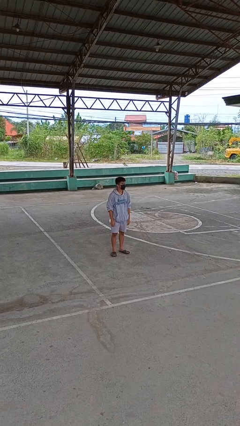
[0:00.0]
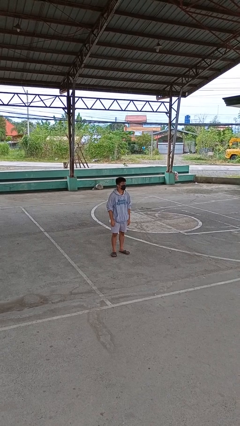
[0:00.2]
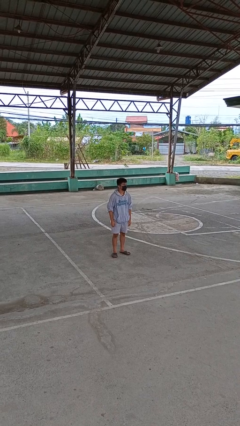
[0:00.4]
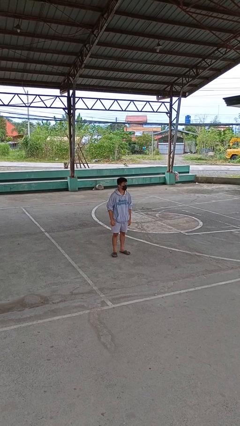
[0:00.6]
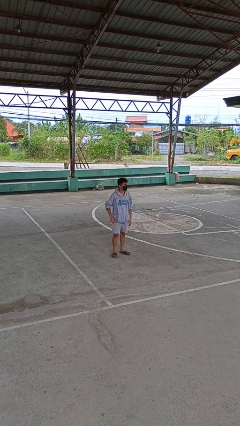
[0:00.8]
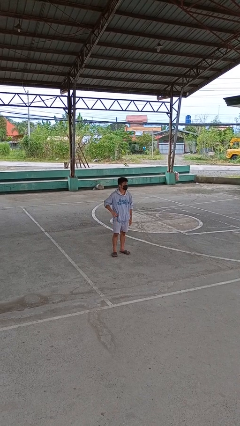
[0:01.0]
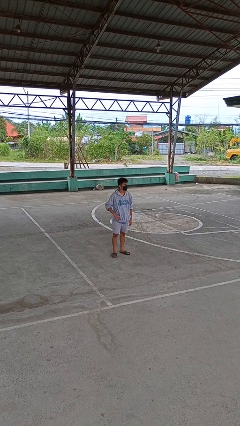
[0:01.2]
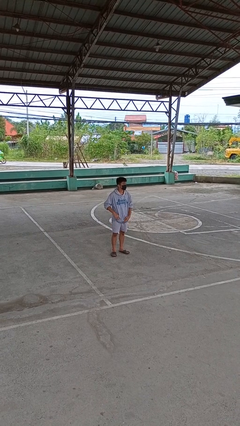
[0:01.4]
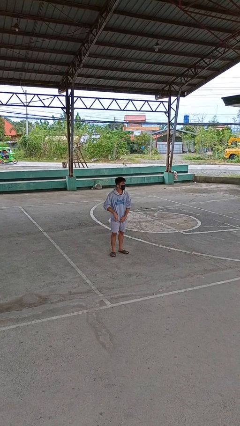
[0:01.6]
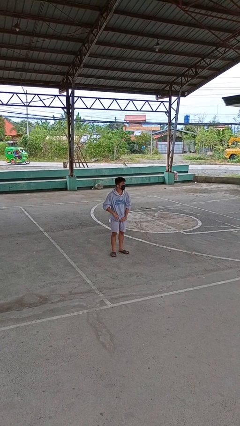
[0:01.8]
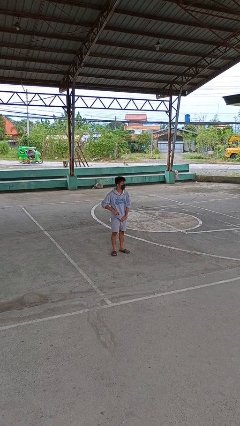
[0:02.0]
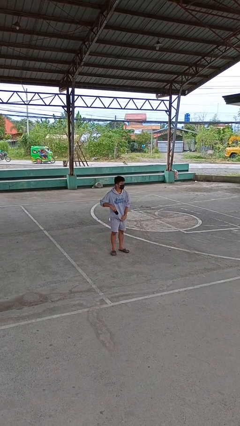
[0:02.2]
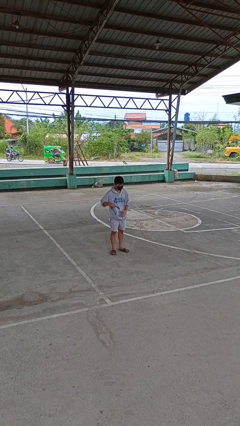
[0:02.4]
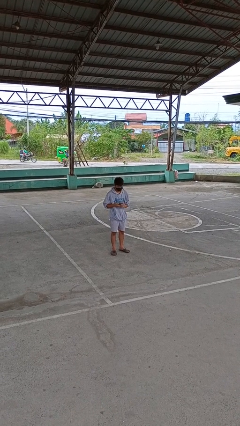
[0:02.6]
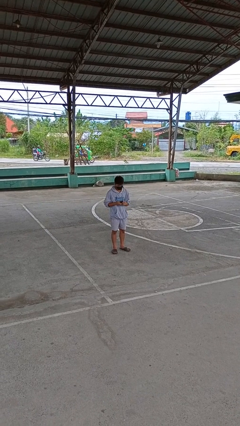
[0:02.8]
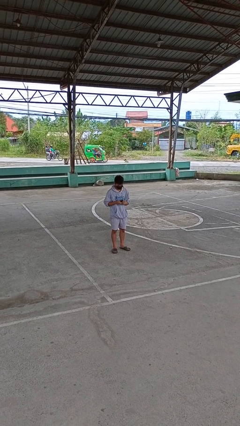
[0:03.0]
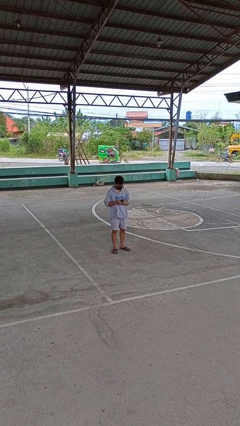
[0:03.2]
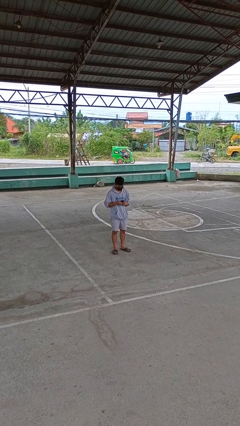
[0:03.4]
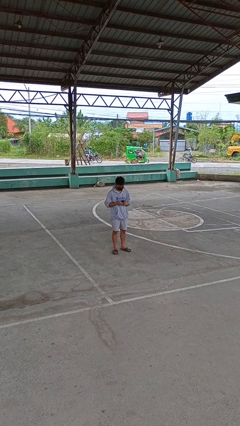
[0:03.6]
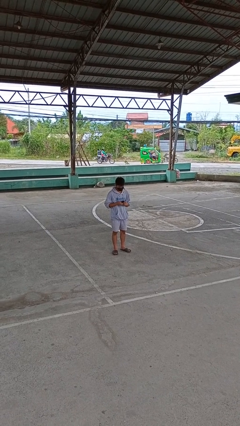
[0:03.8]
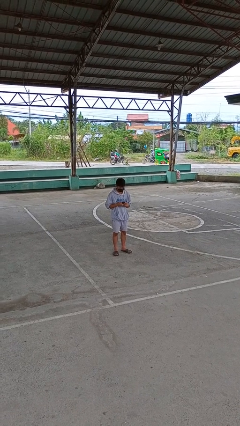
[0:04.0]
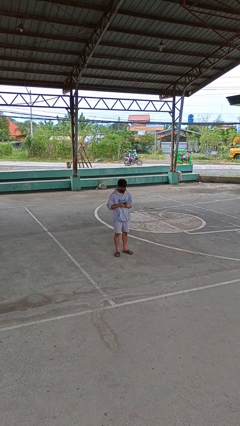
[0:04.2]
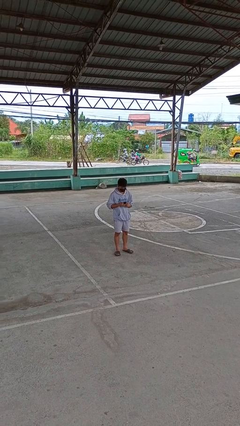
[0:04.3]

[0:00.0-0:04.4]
person takes phone from pocket

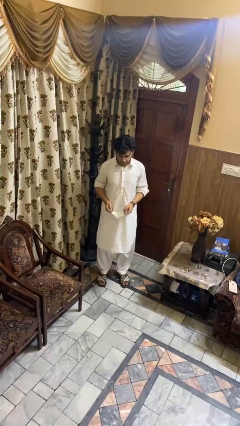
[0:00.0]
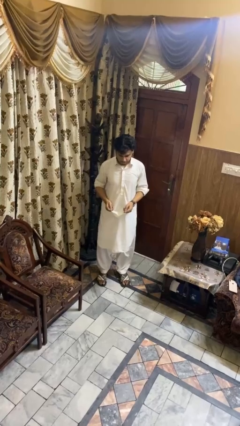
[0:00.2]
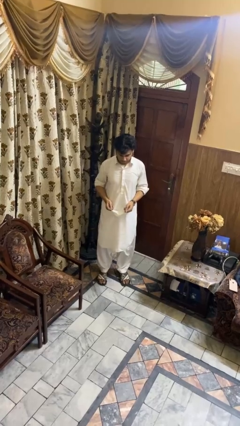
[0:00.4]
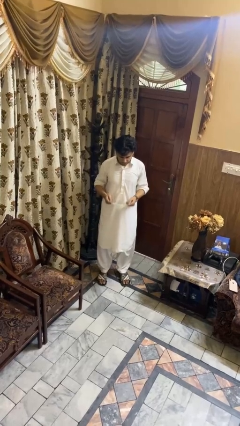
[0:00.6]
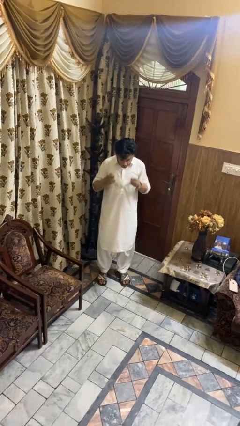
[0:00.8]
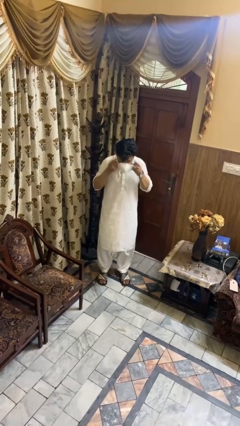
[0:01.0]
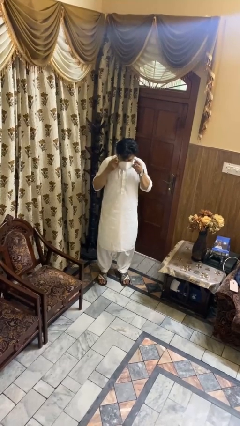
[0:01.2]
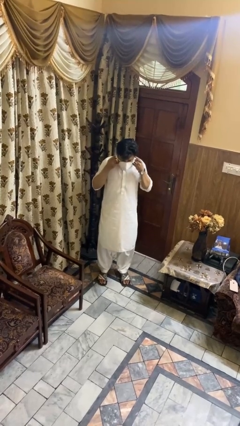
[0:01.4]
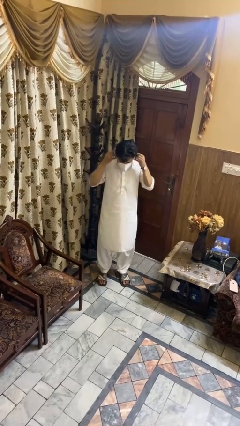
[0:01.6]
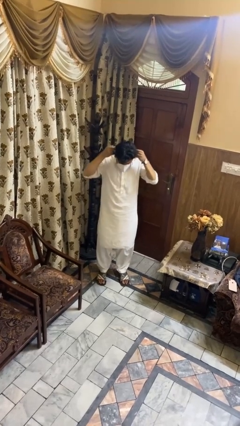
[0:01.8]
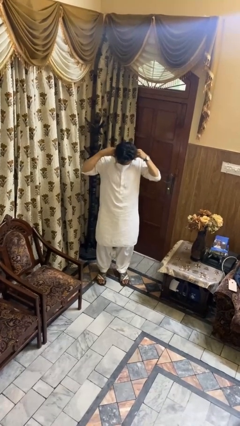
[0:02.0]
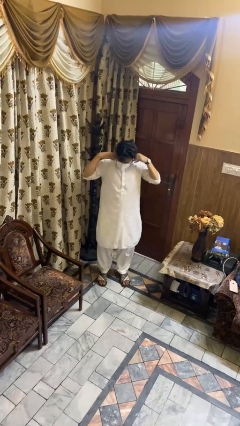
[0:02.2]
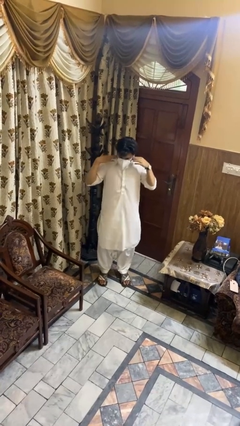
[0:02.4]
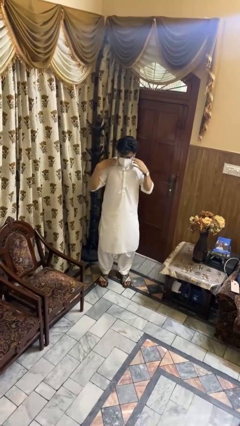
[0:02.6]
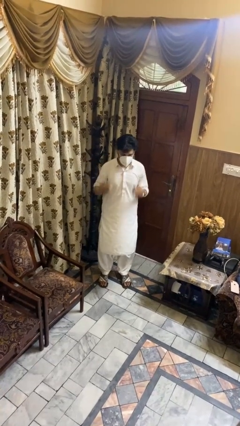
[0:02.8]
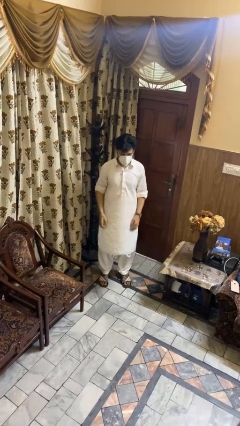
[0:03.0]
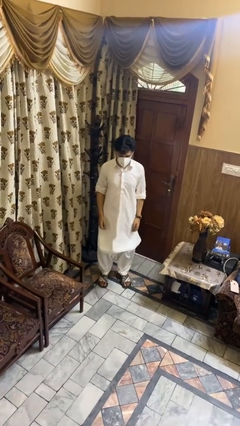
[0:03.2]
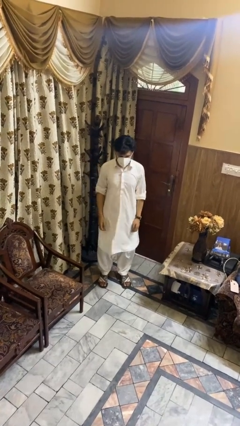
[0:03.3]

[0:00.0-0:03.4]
person puts on facemask

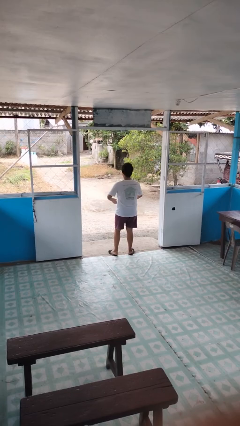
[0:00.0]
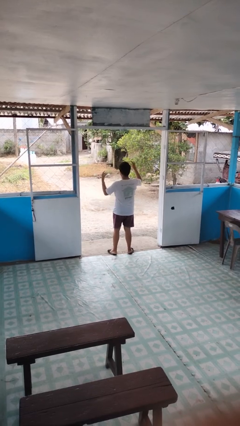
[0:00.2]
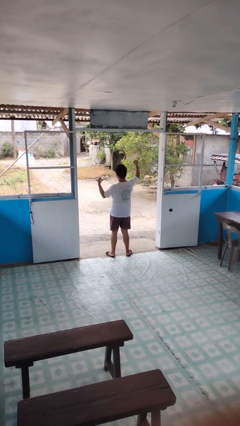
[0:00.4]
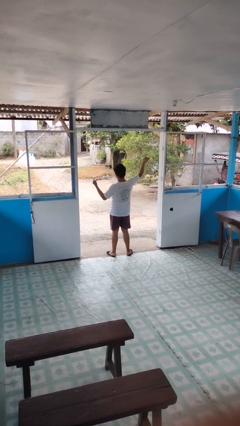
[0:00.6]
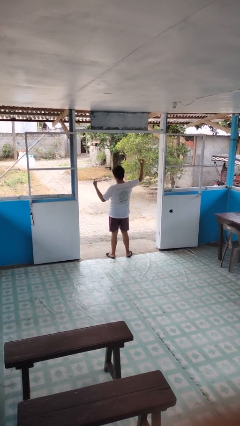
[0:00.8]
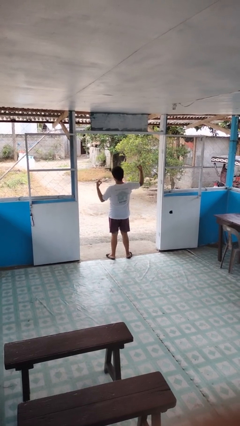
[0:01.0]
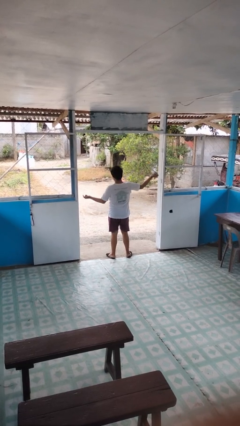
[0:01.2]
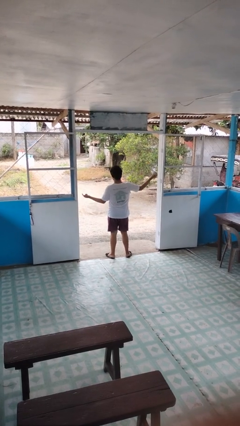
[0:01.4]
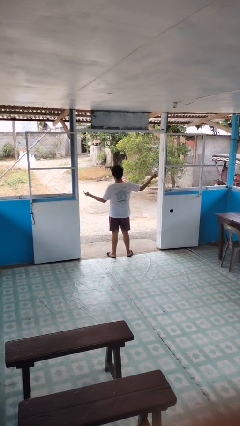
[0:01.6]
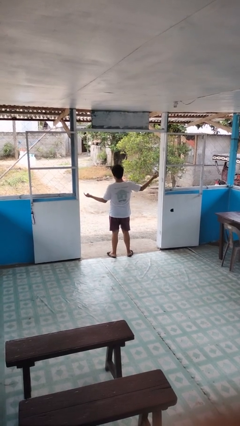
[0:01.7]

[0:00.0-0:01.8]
person snaps fingers

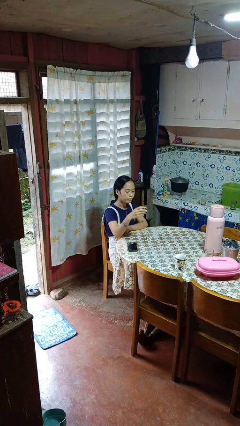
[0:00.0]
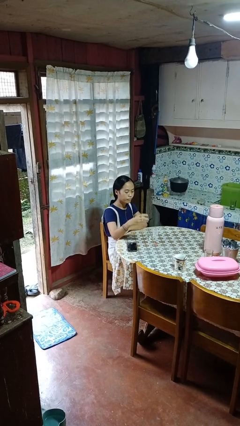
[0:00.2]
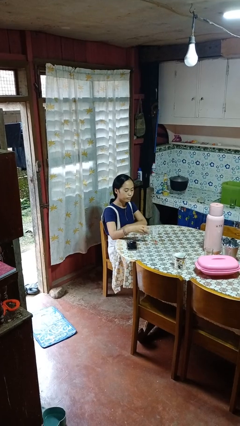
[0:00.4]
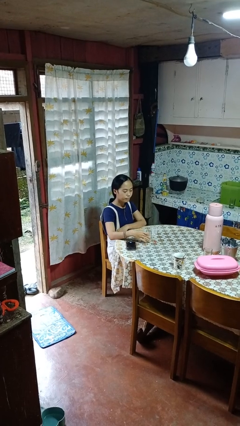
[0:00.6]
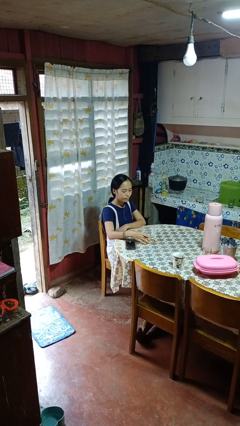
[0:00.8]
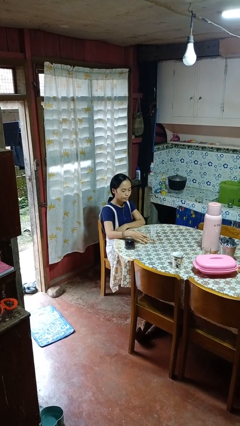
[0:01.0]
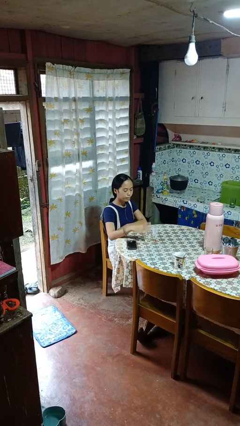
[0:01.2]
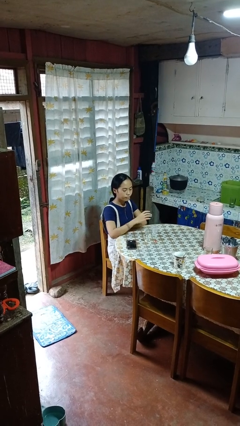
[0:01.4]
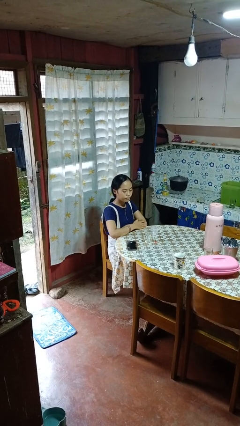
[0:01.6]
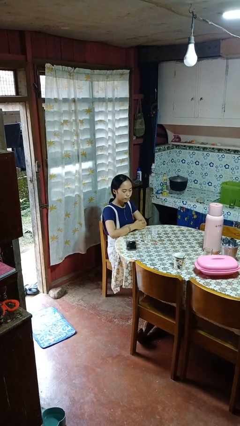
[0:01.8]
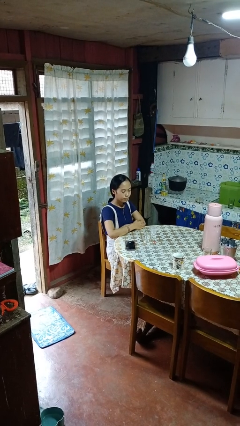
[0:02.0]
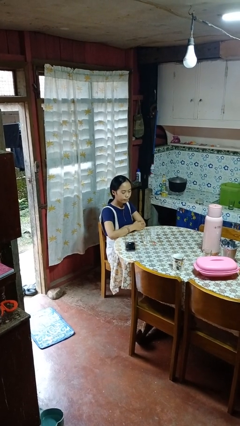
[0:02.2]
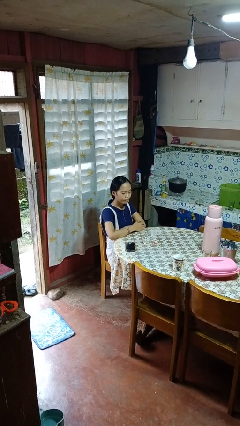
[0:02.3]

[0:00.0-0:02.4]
person puts down object on table

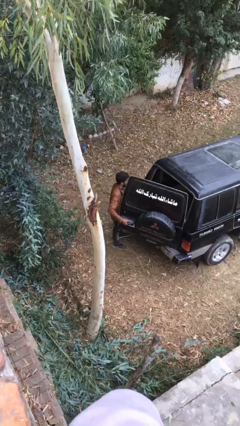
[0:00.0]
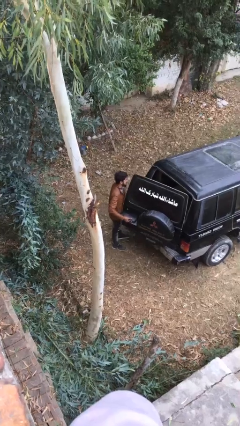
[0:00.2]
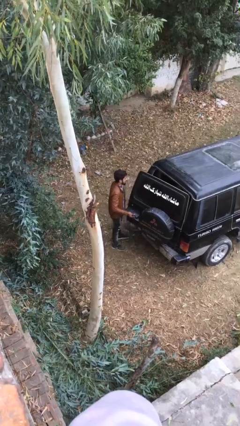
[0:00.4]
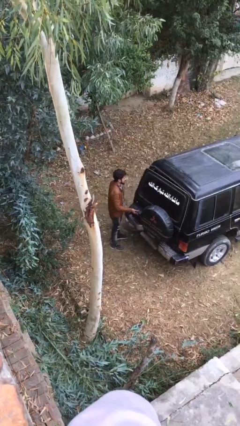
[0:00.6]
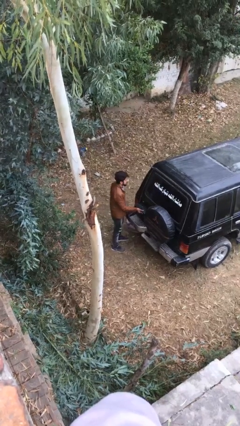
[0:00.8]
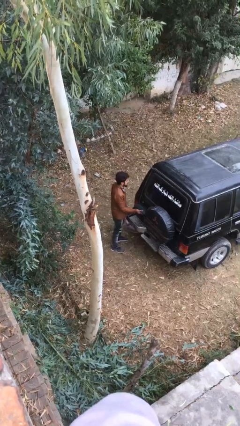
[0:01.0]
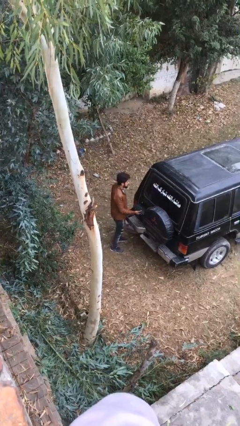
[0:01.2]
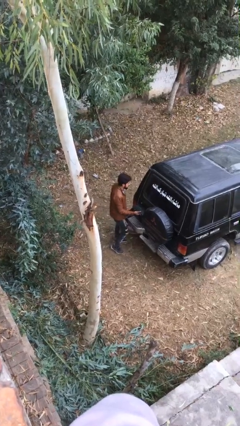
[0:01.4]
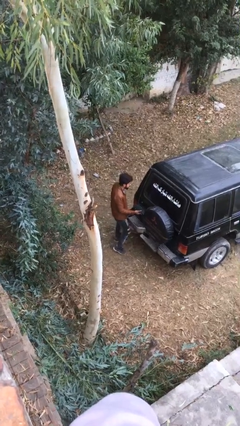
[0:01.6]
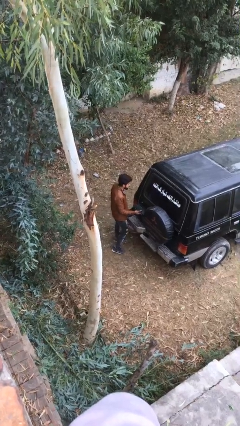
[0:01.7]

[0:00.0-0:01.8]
person closes car trunk

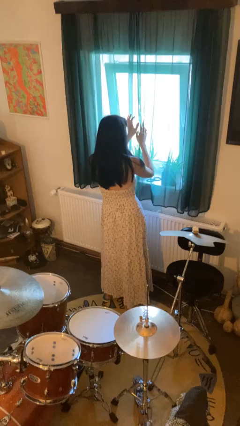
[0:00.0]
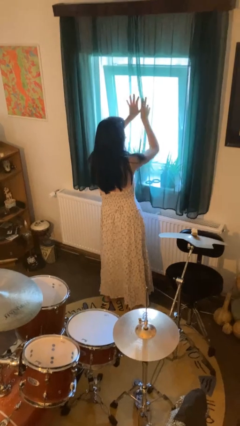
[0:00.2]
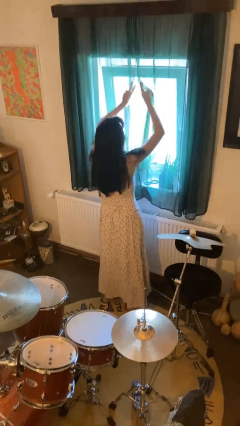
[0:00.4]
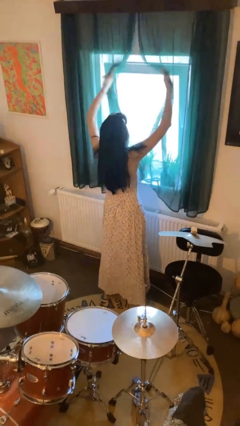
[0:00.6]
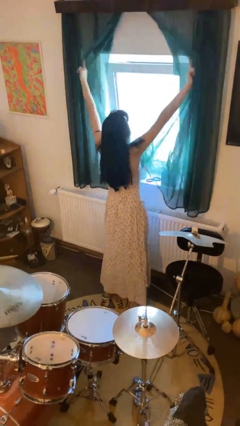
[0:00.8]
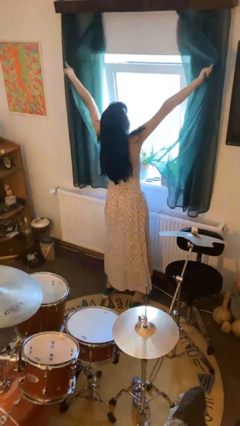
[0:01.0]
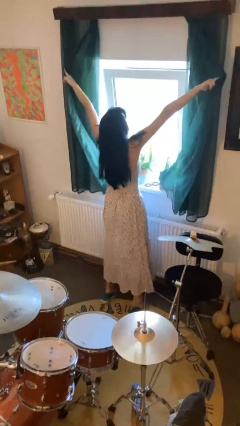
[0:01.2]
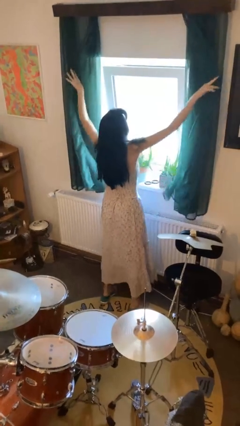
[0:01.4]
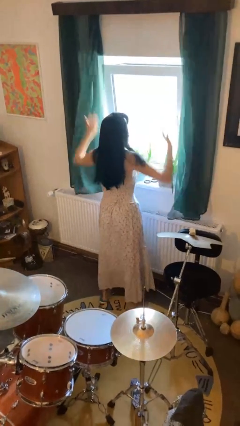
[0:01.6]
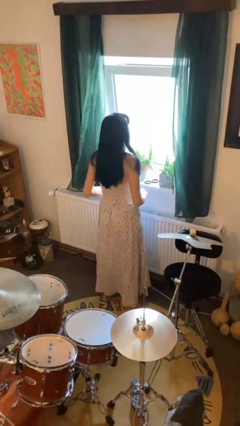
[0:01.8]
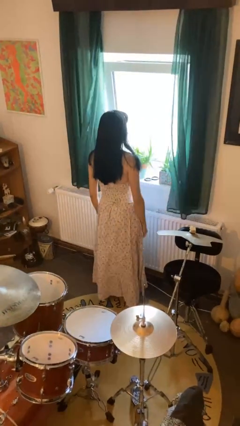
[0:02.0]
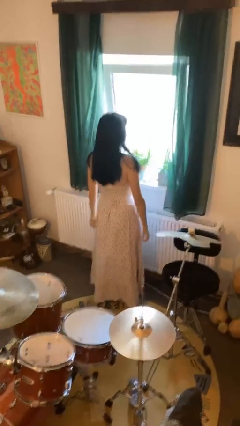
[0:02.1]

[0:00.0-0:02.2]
person opens curtains

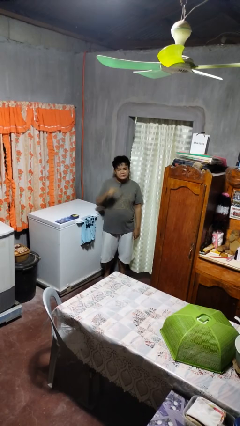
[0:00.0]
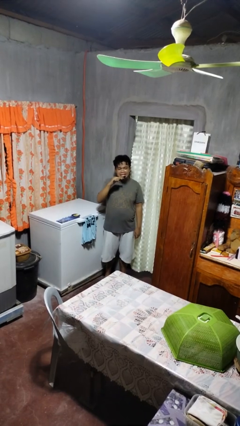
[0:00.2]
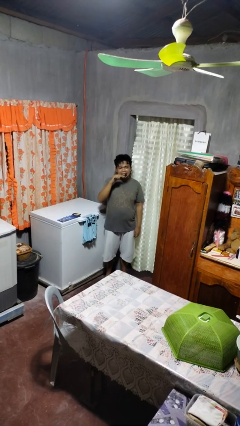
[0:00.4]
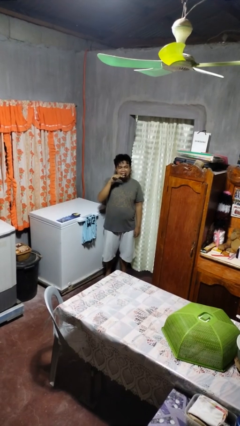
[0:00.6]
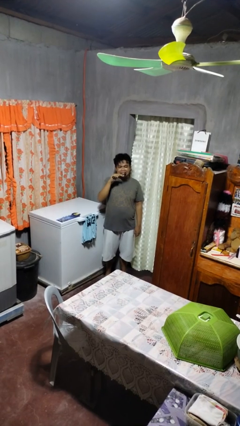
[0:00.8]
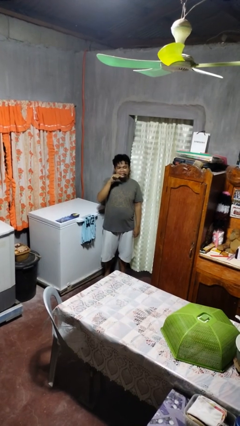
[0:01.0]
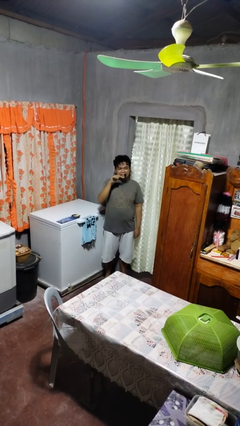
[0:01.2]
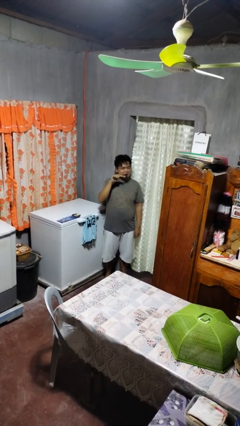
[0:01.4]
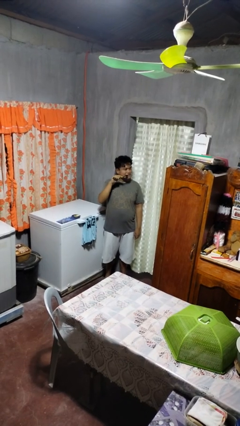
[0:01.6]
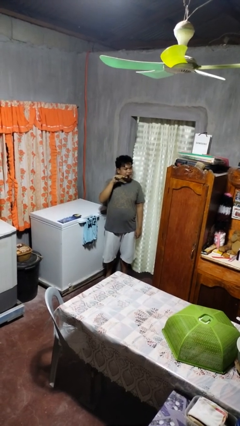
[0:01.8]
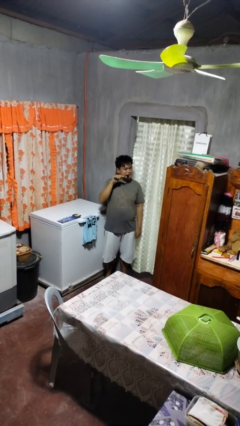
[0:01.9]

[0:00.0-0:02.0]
person brushes teeth
